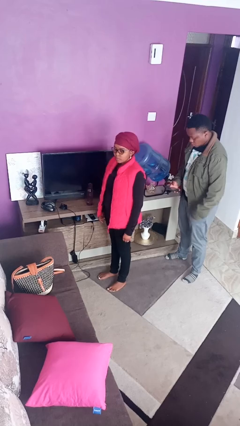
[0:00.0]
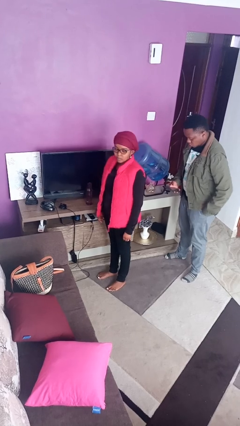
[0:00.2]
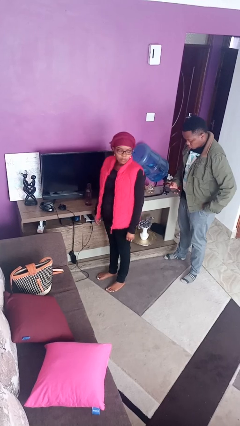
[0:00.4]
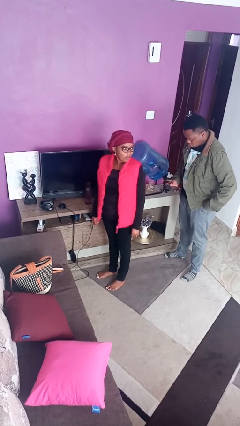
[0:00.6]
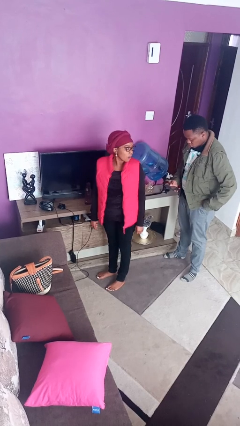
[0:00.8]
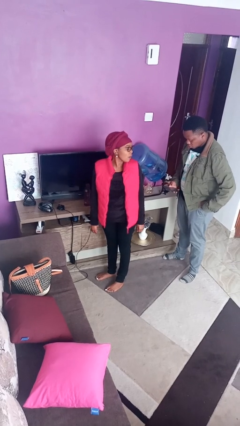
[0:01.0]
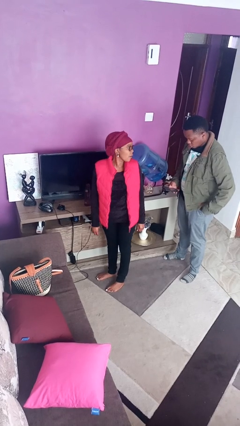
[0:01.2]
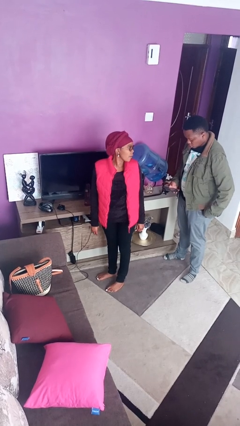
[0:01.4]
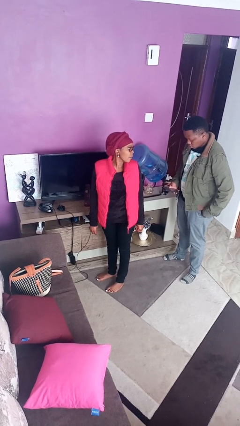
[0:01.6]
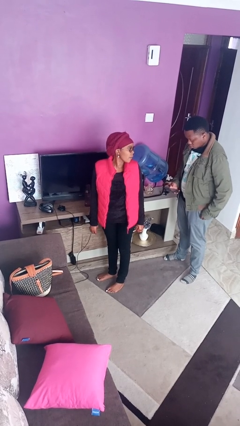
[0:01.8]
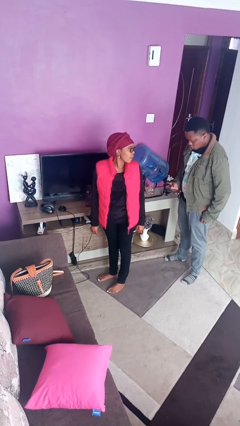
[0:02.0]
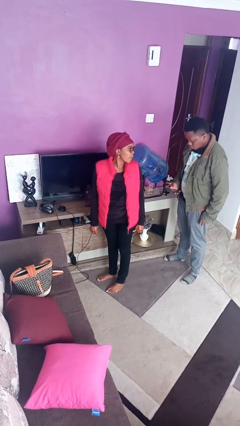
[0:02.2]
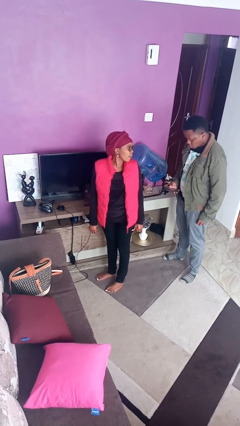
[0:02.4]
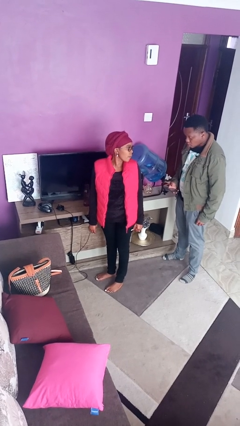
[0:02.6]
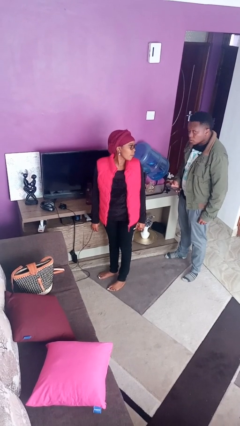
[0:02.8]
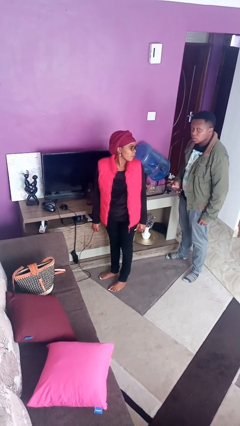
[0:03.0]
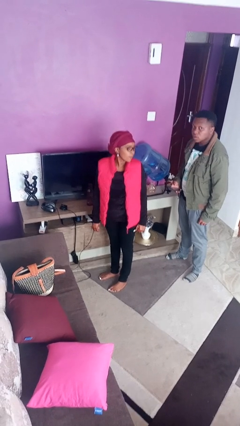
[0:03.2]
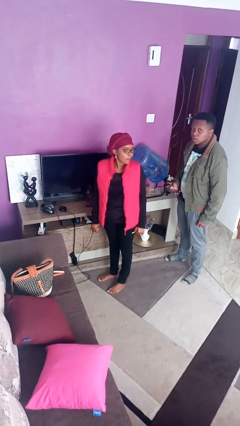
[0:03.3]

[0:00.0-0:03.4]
person looks over shoulder

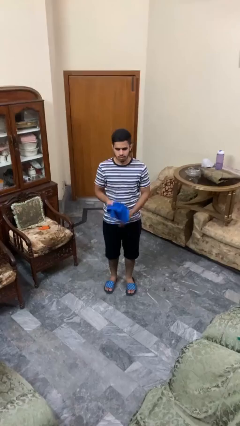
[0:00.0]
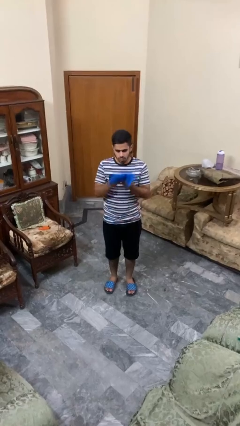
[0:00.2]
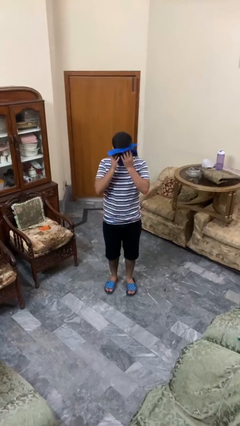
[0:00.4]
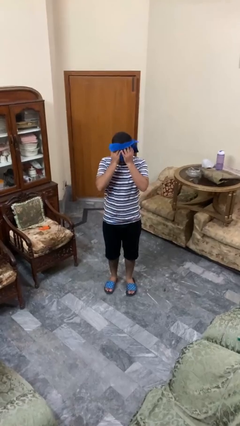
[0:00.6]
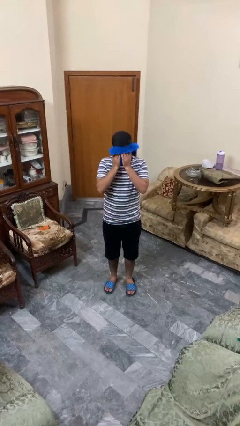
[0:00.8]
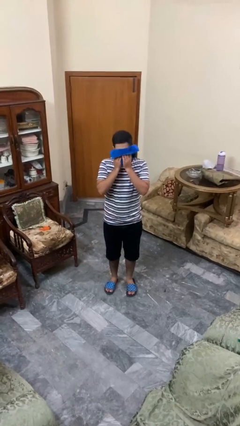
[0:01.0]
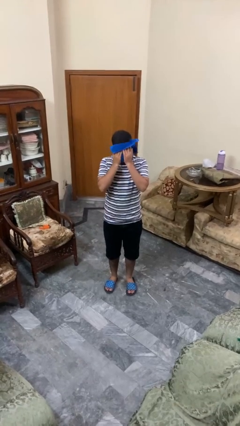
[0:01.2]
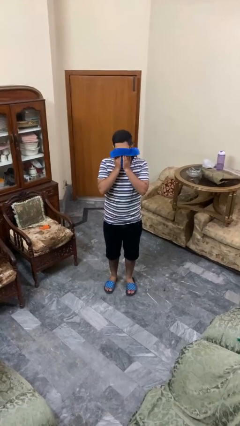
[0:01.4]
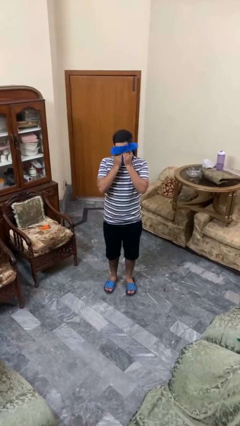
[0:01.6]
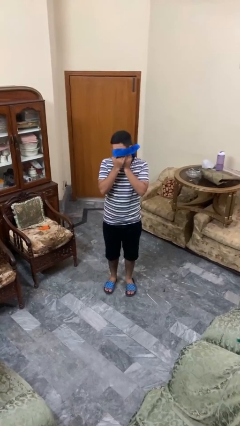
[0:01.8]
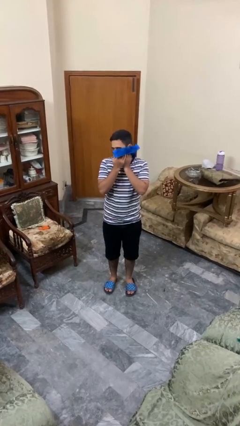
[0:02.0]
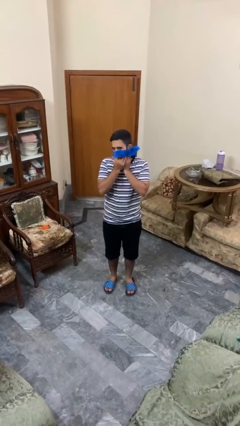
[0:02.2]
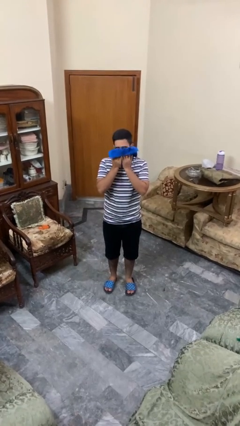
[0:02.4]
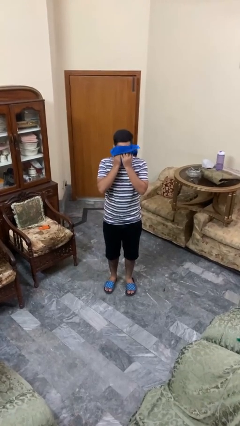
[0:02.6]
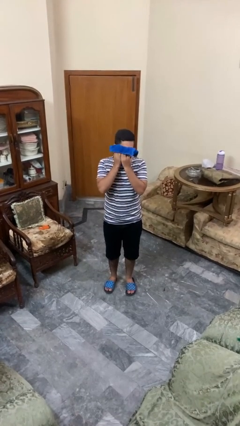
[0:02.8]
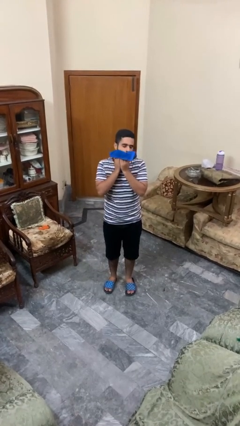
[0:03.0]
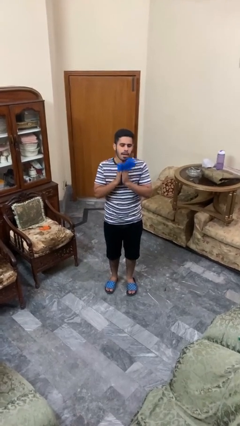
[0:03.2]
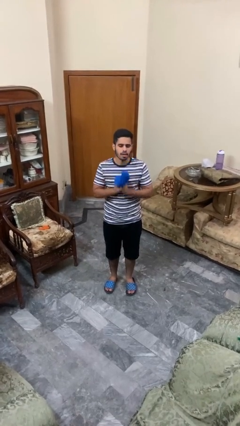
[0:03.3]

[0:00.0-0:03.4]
person wipes mouth with napkin

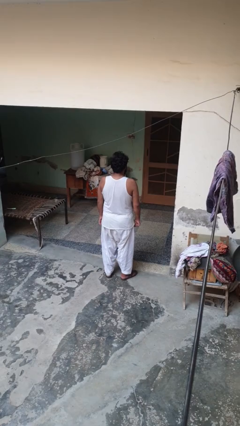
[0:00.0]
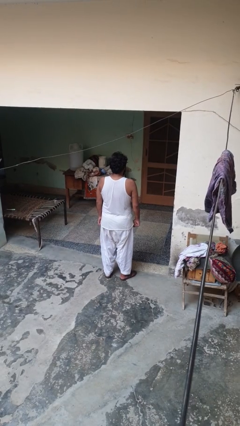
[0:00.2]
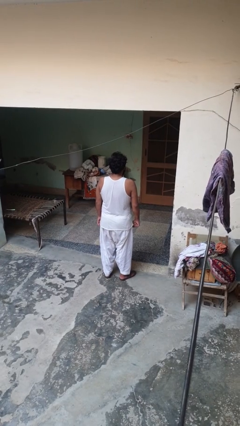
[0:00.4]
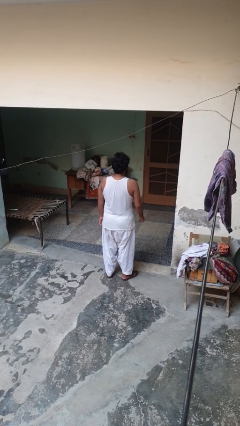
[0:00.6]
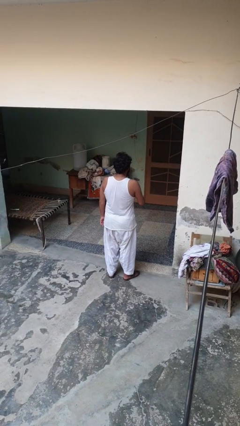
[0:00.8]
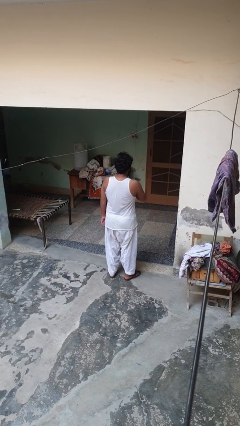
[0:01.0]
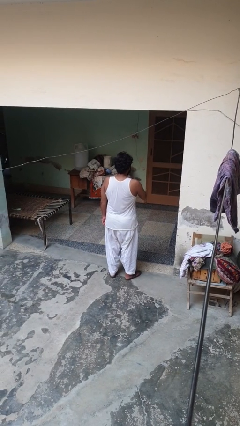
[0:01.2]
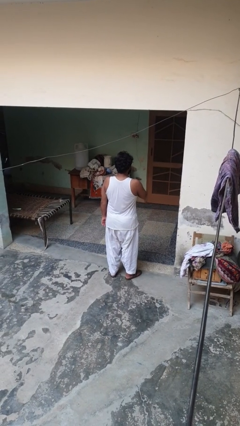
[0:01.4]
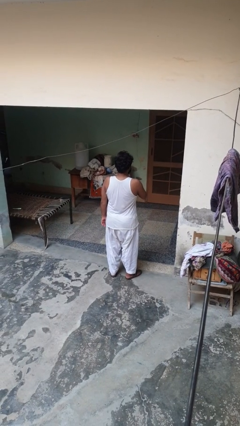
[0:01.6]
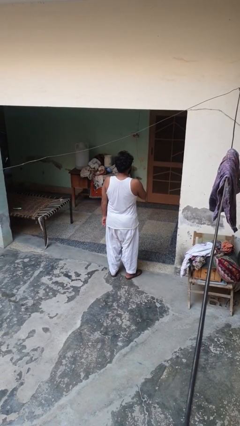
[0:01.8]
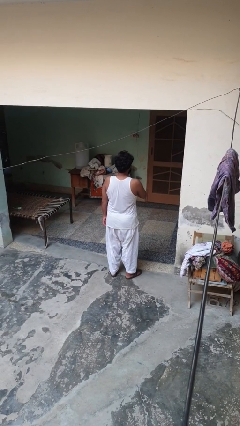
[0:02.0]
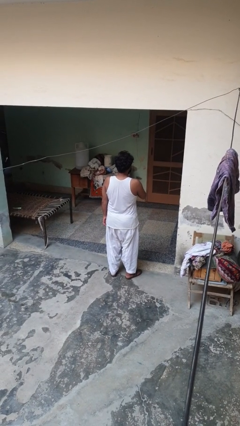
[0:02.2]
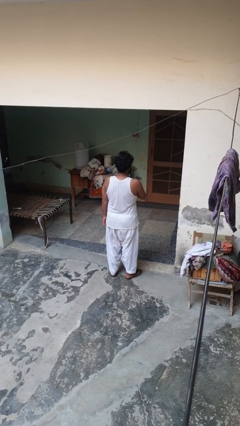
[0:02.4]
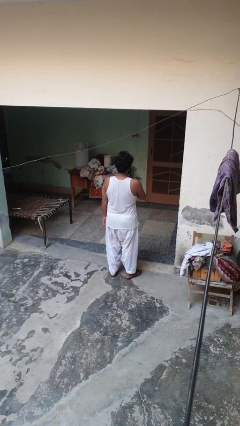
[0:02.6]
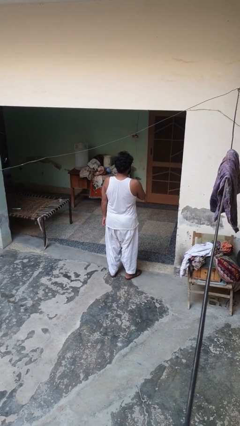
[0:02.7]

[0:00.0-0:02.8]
person drums on chest

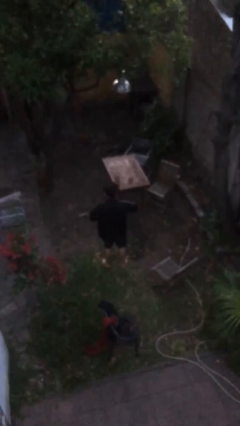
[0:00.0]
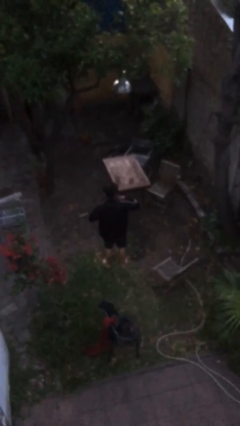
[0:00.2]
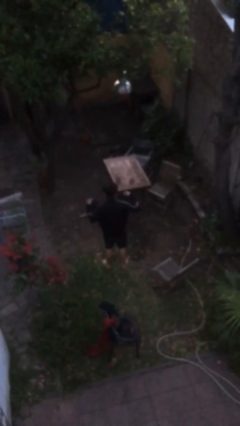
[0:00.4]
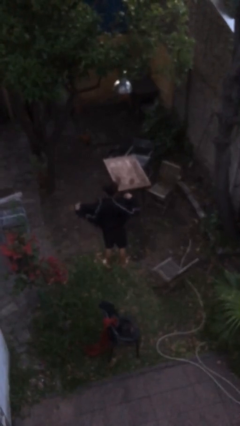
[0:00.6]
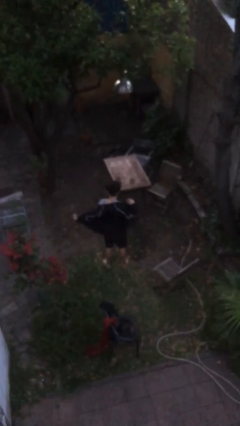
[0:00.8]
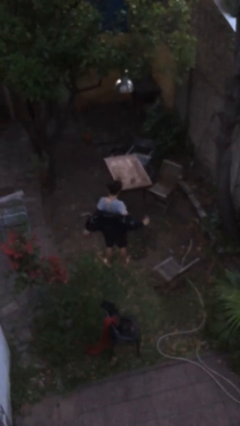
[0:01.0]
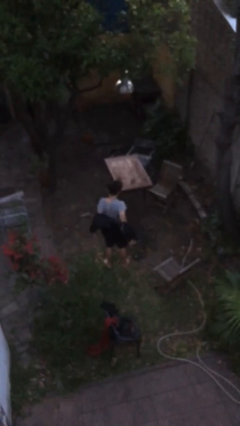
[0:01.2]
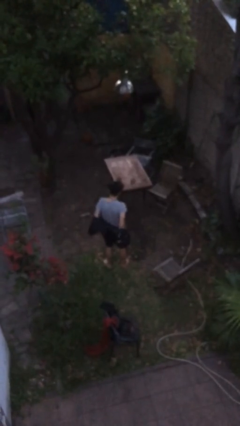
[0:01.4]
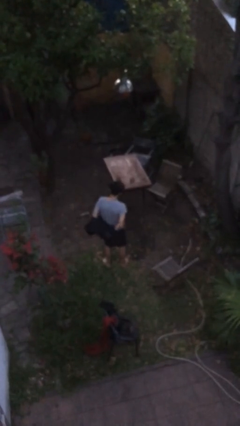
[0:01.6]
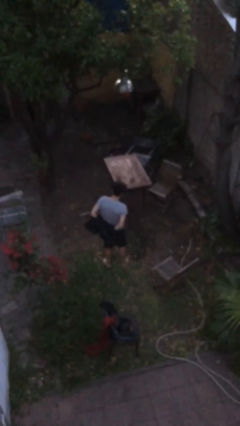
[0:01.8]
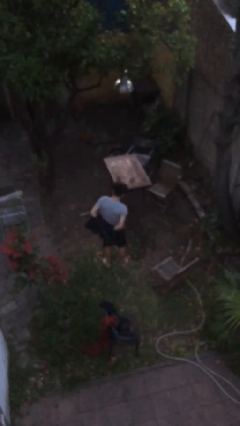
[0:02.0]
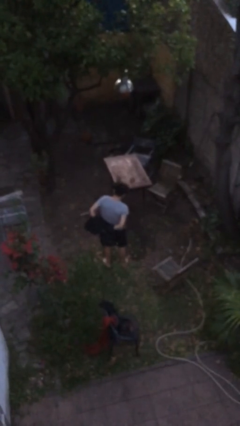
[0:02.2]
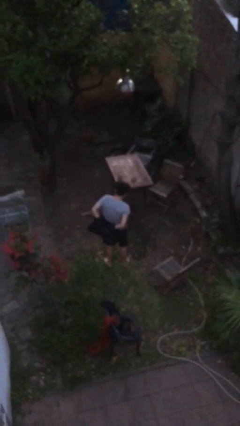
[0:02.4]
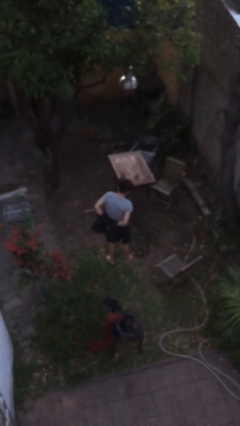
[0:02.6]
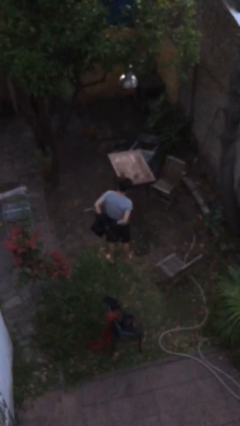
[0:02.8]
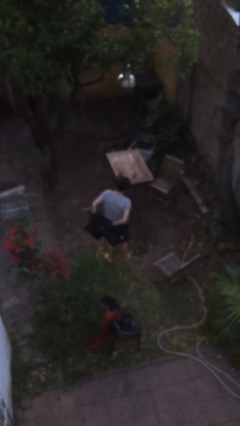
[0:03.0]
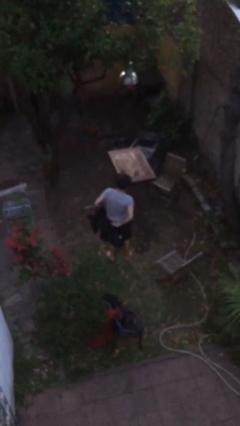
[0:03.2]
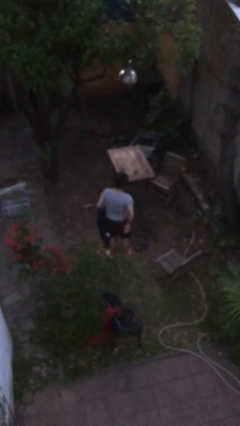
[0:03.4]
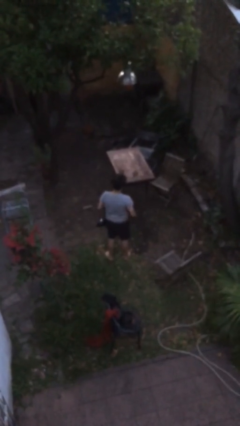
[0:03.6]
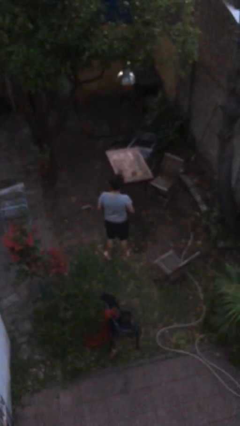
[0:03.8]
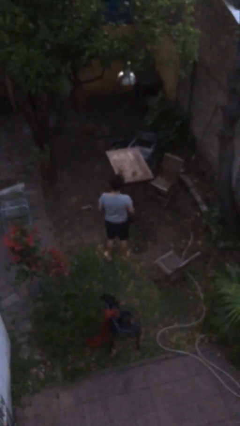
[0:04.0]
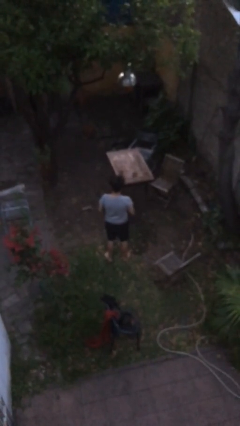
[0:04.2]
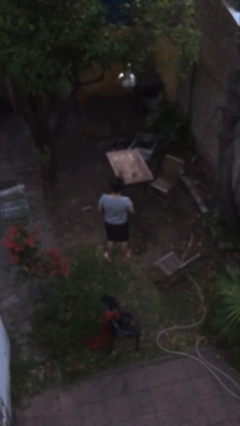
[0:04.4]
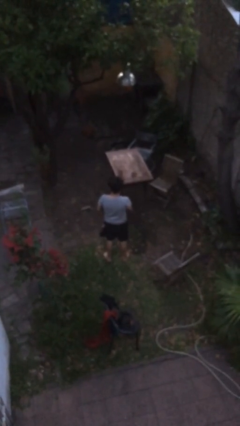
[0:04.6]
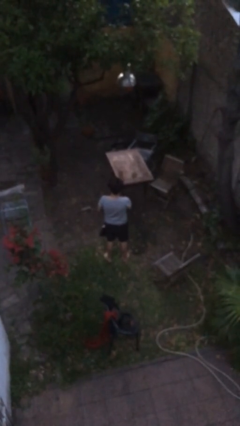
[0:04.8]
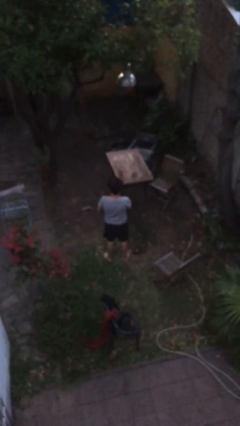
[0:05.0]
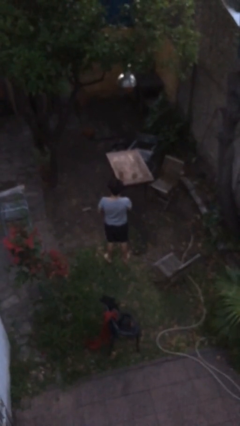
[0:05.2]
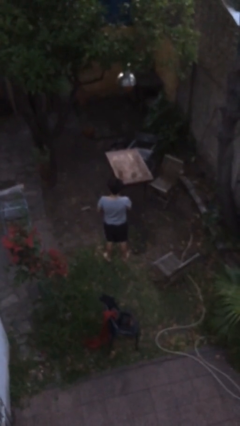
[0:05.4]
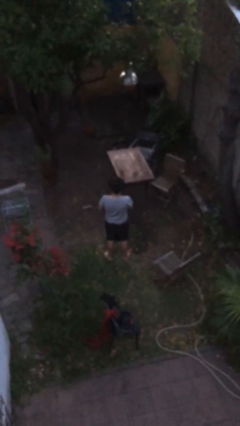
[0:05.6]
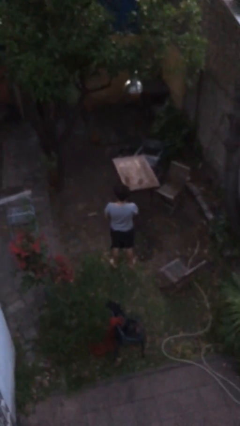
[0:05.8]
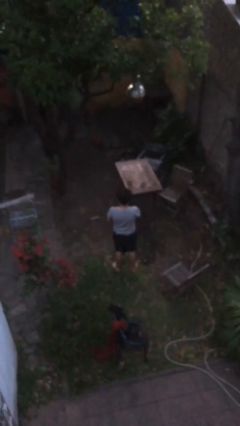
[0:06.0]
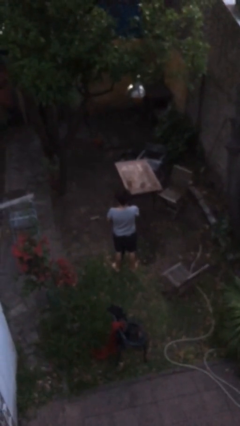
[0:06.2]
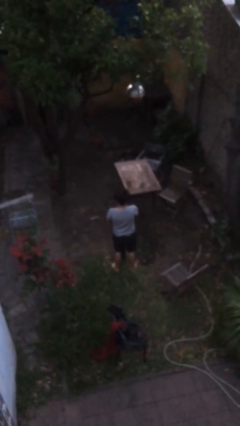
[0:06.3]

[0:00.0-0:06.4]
person takes off jacket

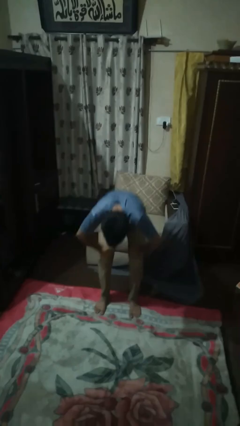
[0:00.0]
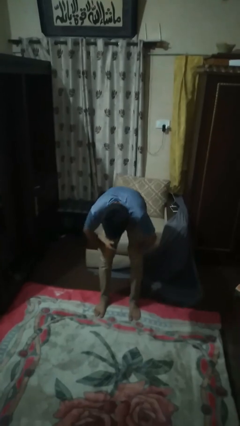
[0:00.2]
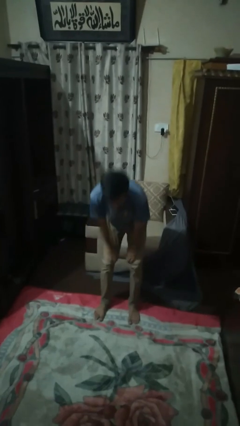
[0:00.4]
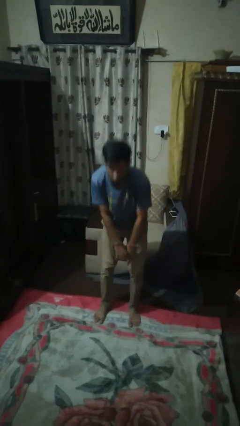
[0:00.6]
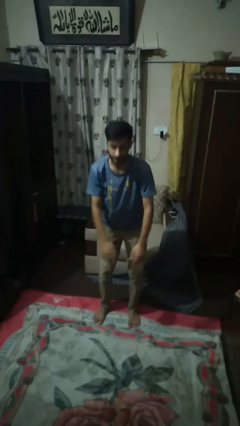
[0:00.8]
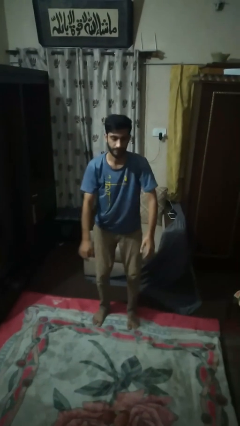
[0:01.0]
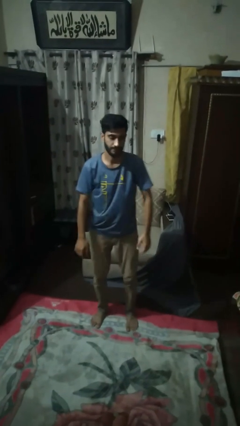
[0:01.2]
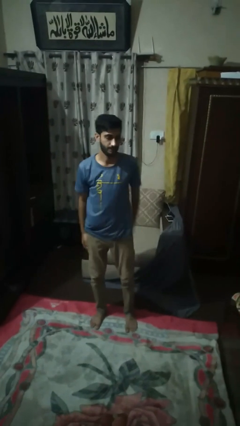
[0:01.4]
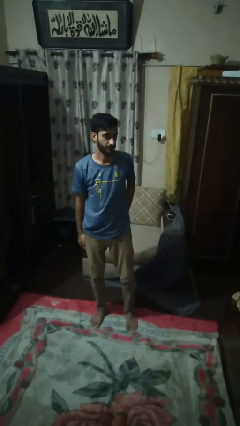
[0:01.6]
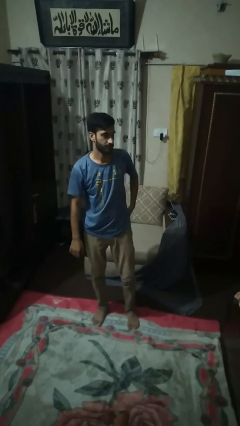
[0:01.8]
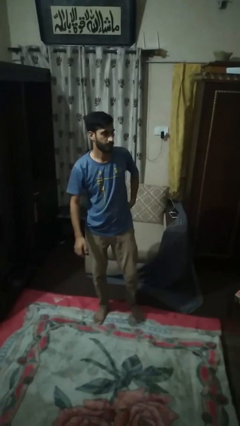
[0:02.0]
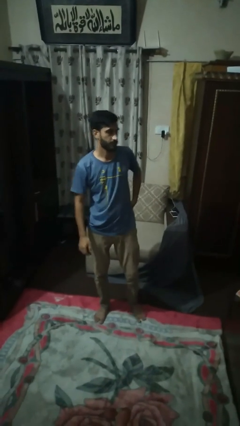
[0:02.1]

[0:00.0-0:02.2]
person stands up
